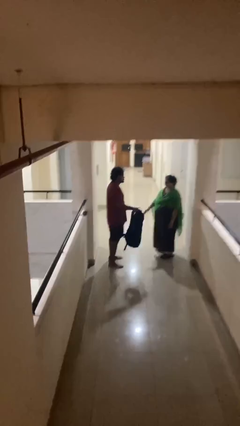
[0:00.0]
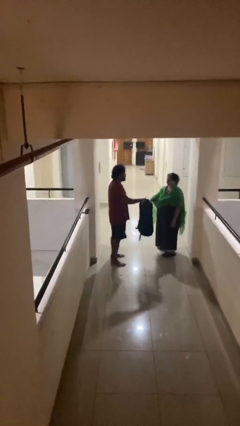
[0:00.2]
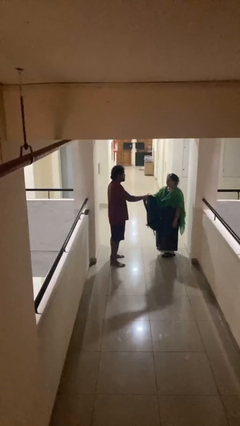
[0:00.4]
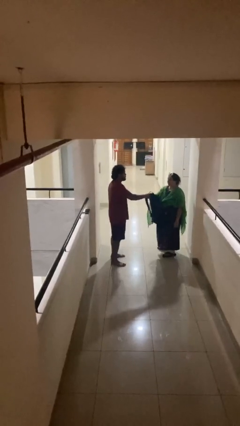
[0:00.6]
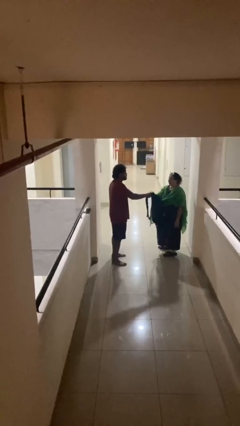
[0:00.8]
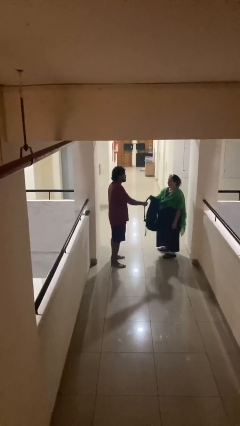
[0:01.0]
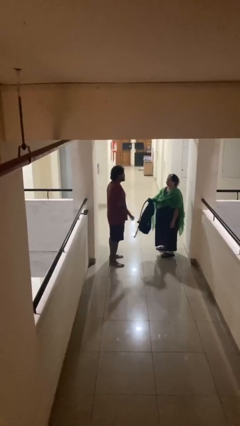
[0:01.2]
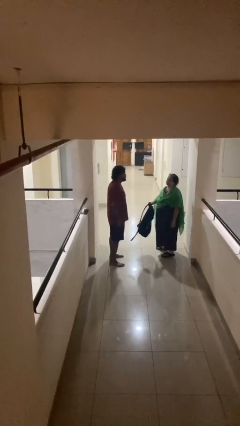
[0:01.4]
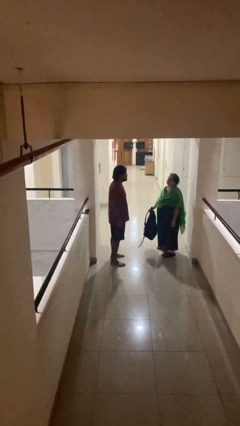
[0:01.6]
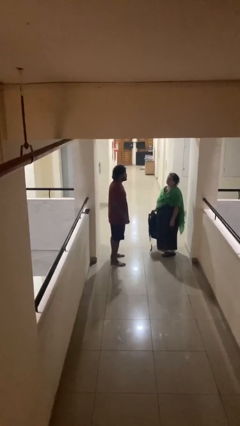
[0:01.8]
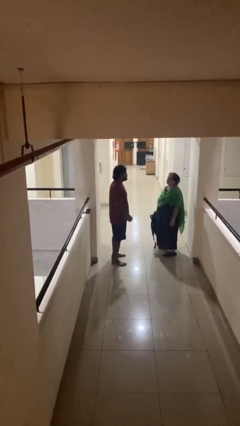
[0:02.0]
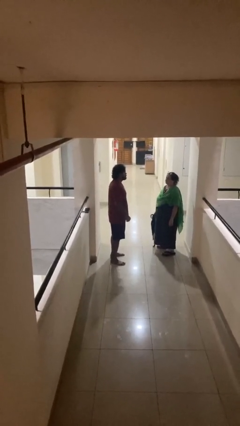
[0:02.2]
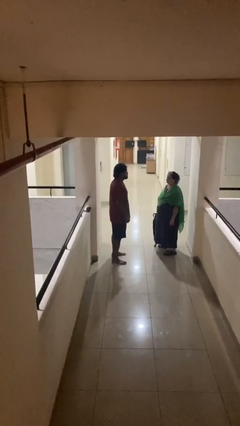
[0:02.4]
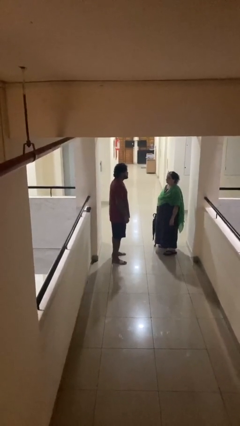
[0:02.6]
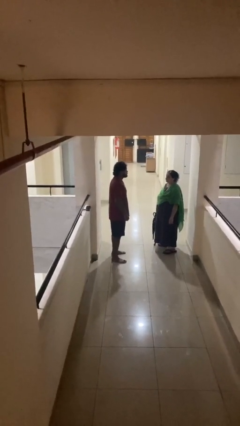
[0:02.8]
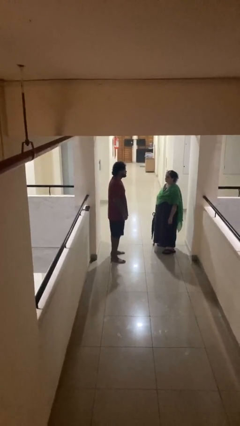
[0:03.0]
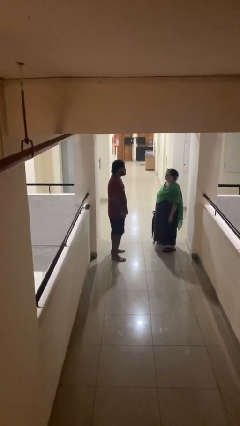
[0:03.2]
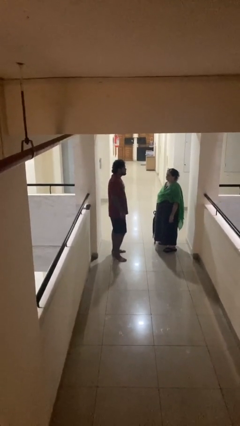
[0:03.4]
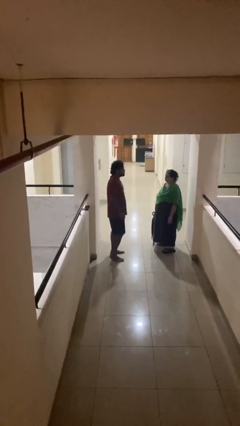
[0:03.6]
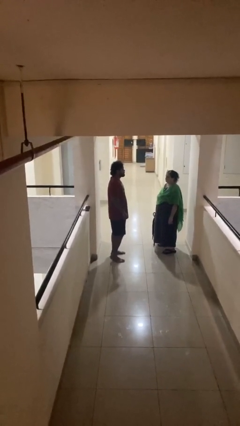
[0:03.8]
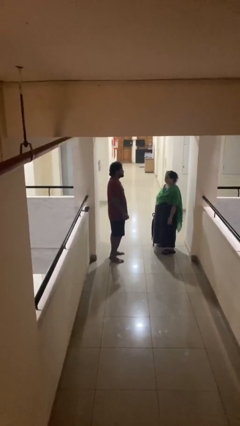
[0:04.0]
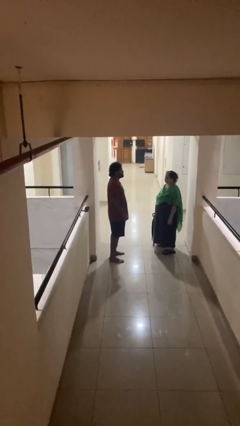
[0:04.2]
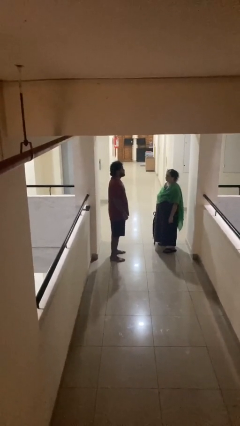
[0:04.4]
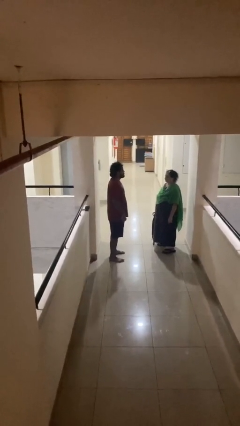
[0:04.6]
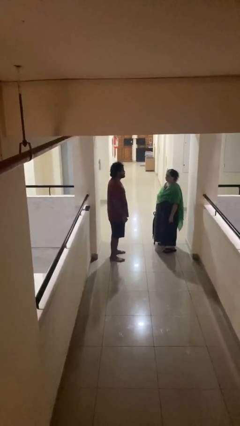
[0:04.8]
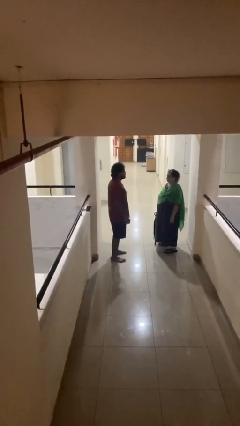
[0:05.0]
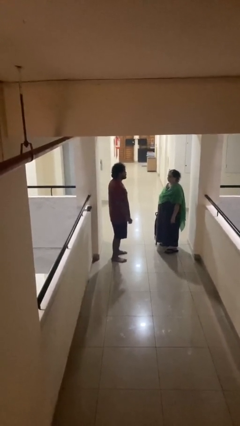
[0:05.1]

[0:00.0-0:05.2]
person transfers object to person

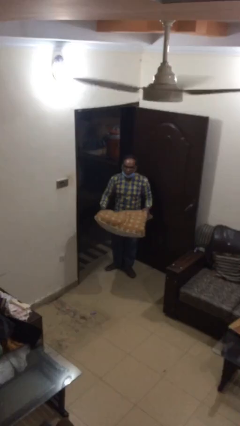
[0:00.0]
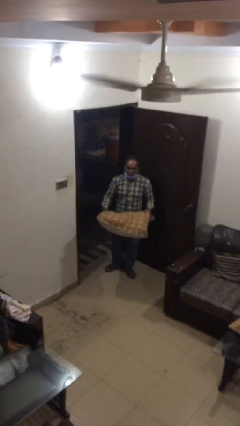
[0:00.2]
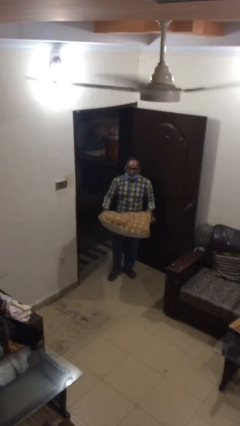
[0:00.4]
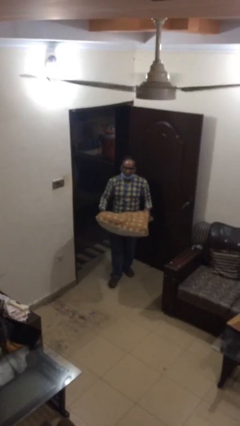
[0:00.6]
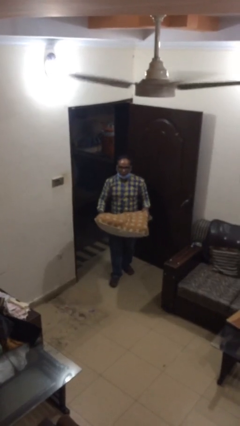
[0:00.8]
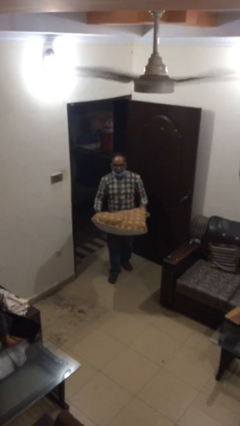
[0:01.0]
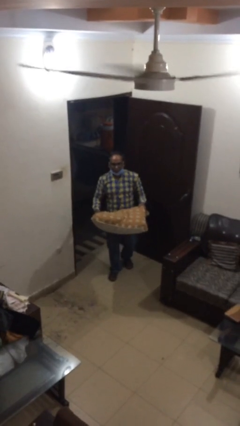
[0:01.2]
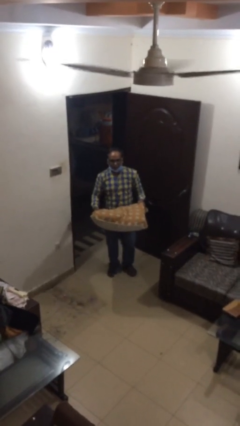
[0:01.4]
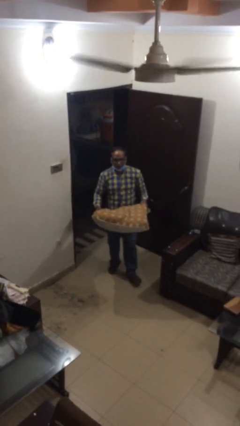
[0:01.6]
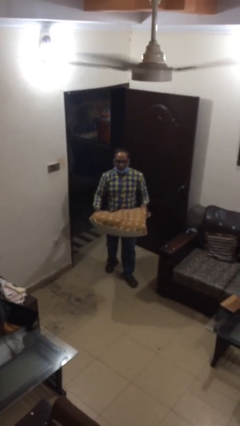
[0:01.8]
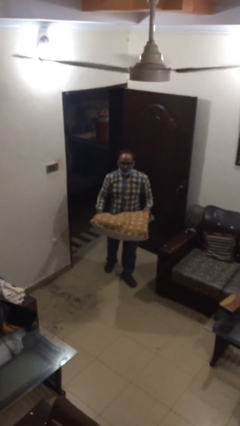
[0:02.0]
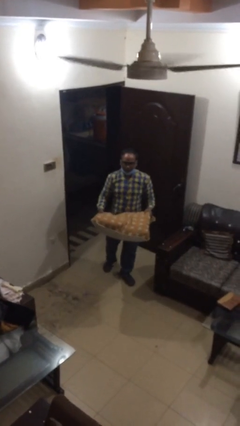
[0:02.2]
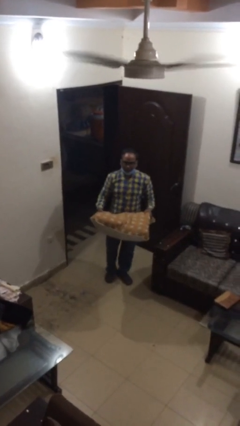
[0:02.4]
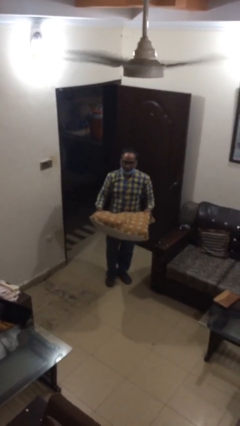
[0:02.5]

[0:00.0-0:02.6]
person carries heavy object

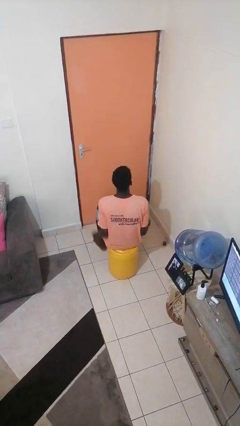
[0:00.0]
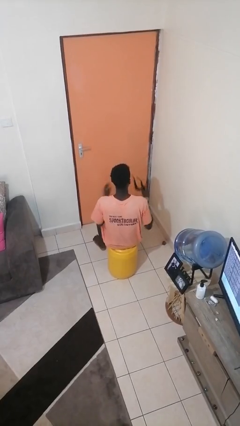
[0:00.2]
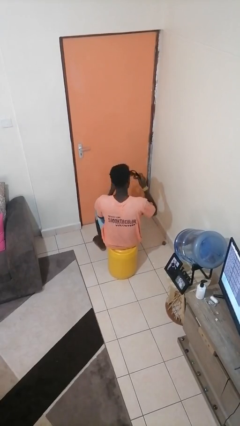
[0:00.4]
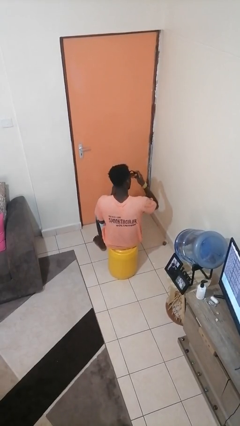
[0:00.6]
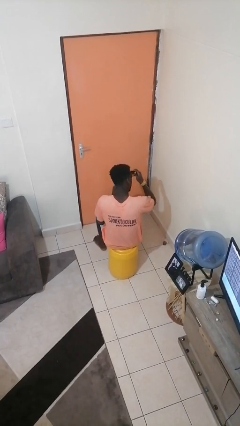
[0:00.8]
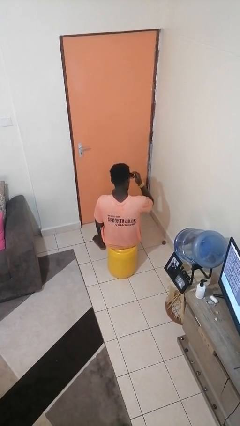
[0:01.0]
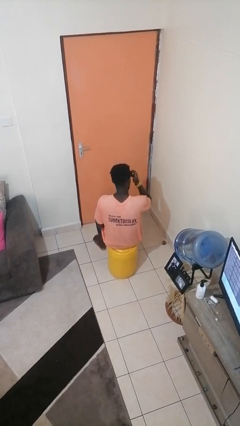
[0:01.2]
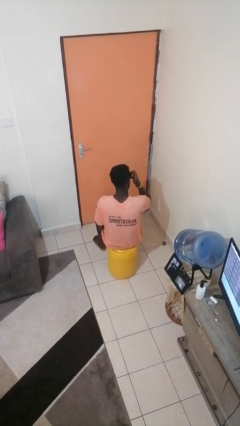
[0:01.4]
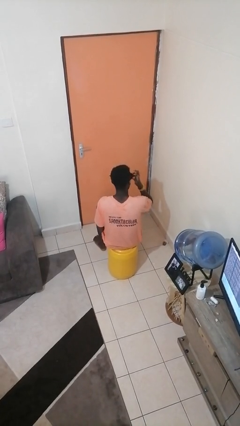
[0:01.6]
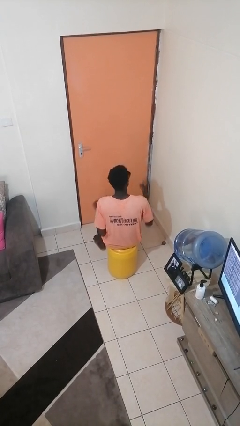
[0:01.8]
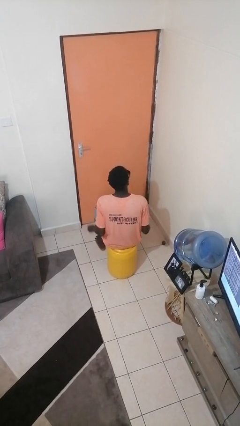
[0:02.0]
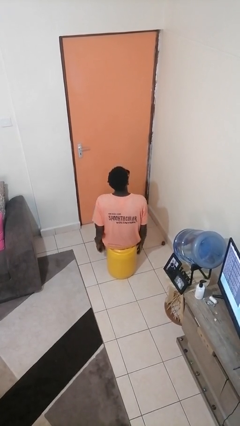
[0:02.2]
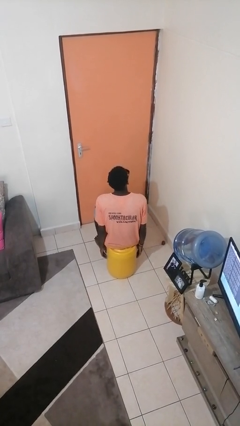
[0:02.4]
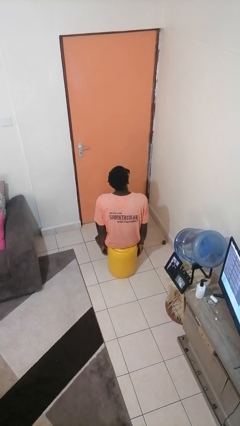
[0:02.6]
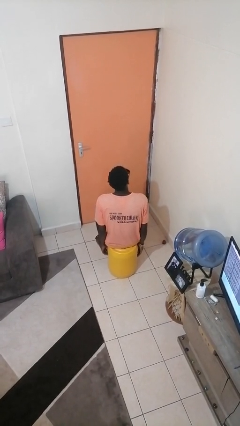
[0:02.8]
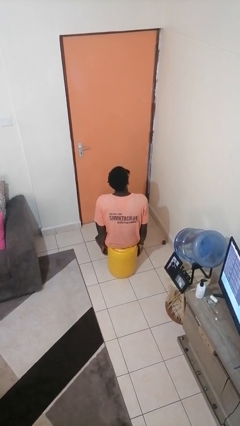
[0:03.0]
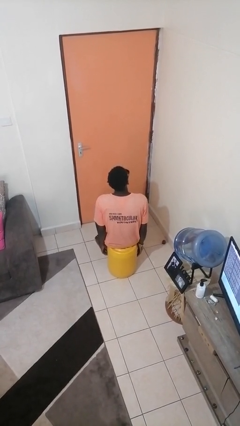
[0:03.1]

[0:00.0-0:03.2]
person puts on sunglasses

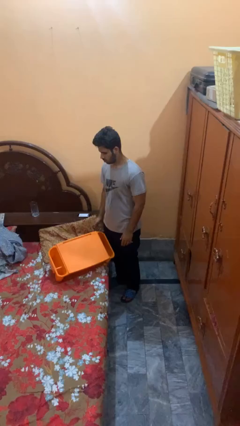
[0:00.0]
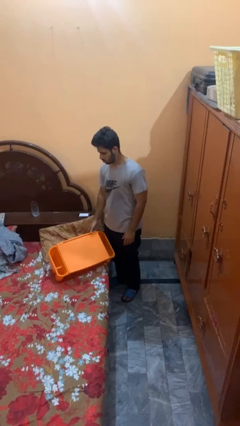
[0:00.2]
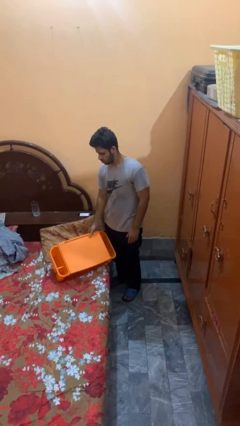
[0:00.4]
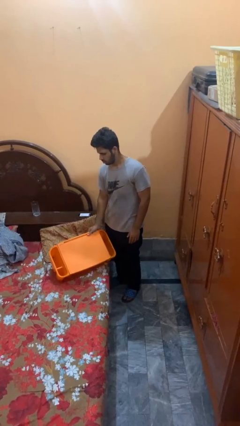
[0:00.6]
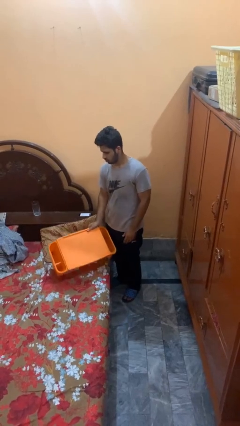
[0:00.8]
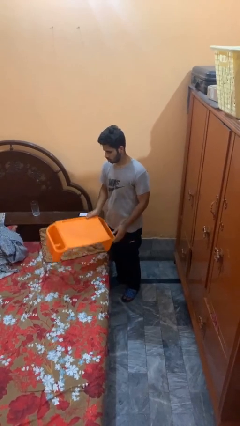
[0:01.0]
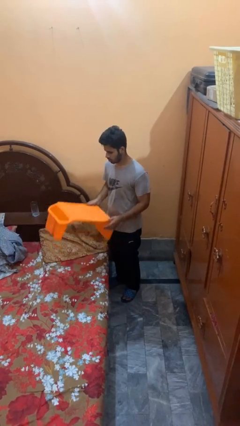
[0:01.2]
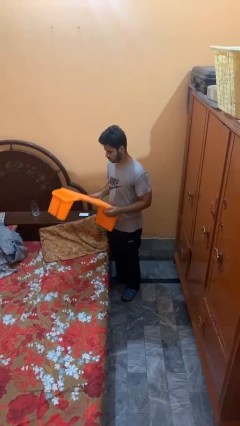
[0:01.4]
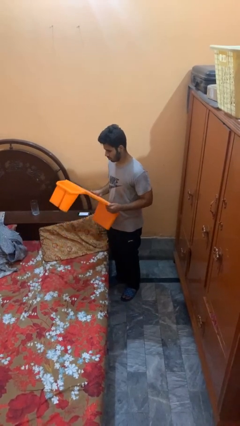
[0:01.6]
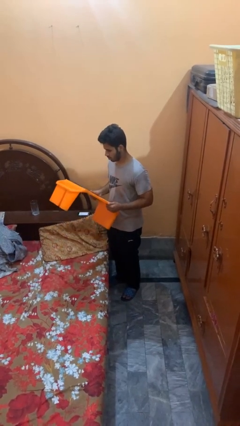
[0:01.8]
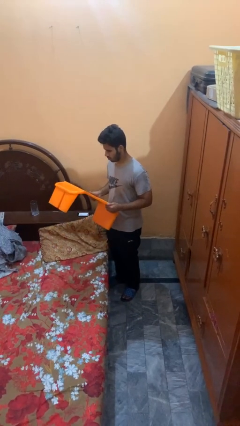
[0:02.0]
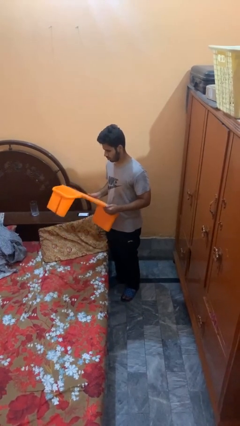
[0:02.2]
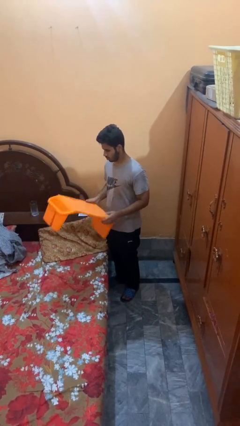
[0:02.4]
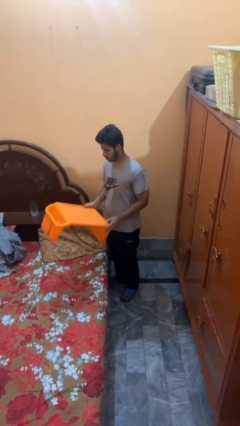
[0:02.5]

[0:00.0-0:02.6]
person picks up object from bed

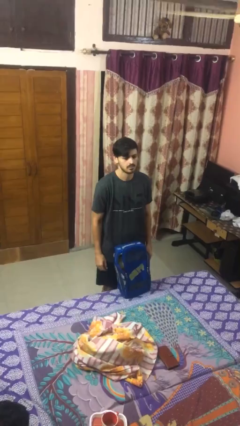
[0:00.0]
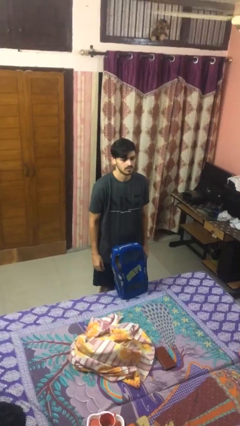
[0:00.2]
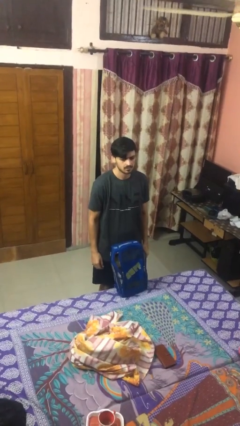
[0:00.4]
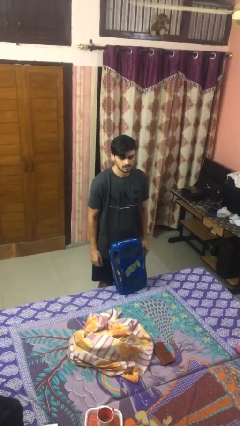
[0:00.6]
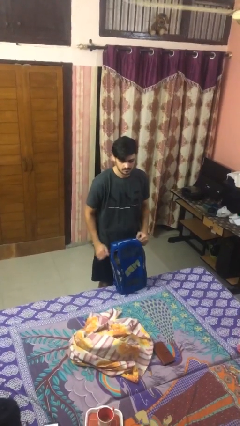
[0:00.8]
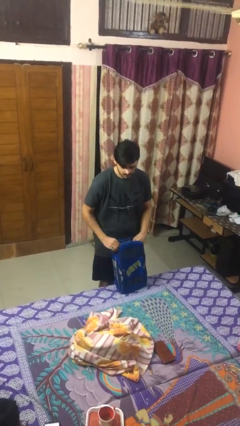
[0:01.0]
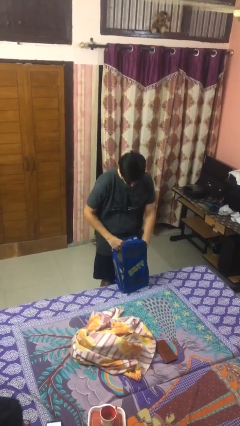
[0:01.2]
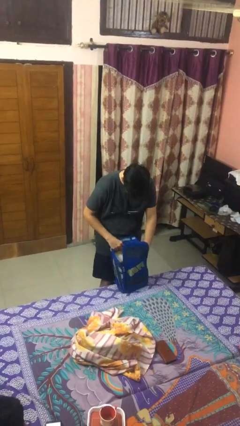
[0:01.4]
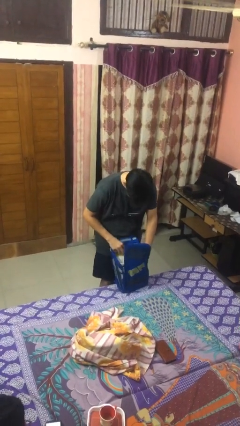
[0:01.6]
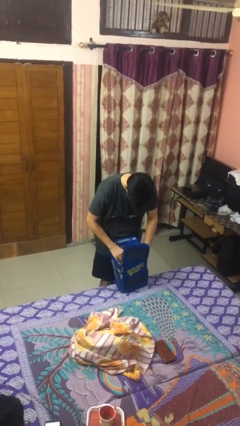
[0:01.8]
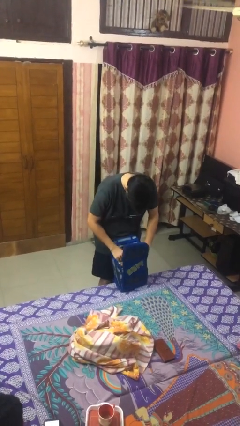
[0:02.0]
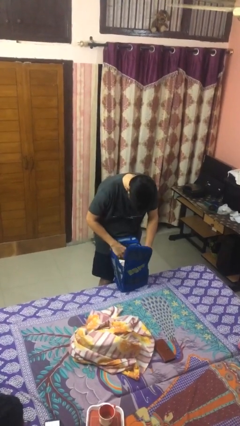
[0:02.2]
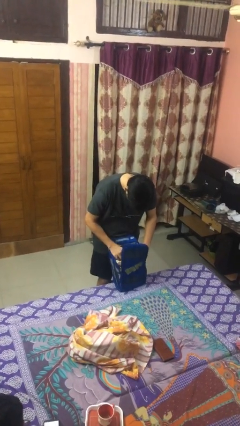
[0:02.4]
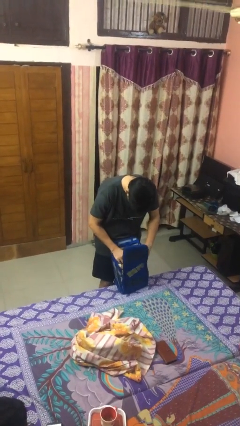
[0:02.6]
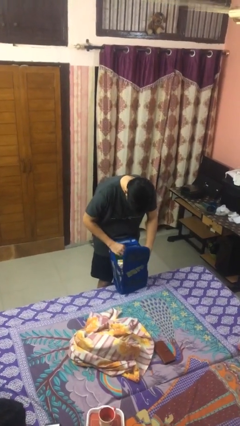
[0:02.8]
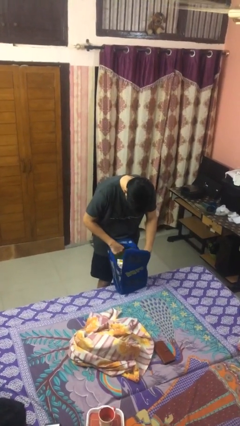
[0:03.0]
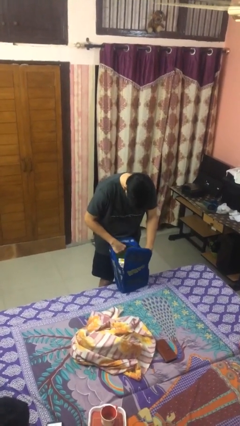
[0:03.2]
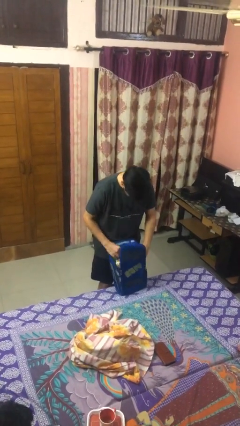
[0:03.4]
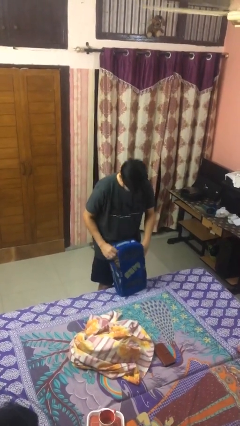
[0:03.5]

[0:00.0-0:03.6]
person searches in bag

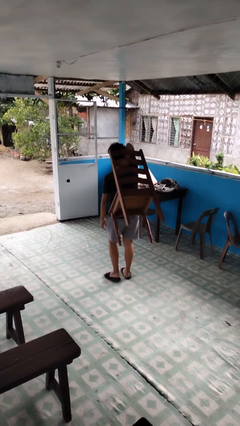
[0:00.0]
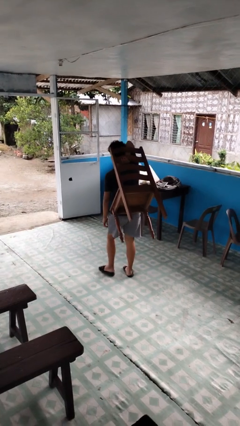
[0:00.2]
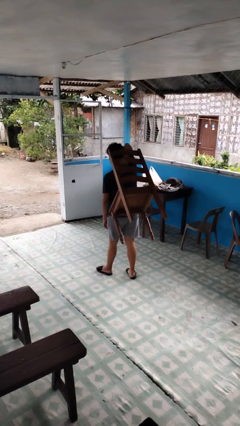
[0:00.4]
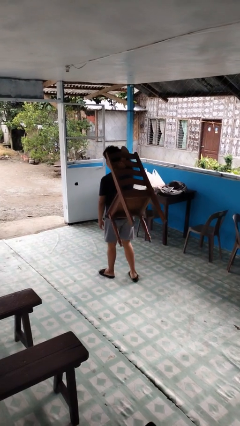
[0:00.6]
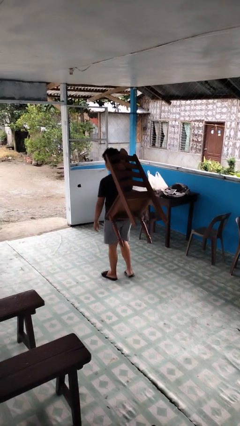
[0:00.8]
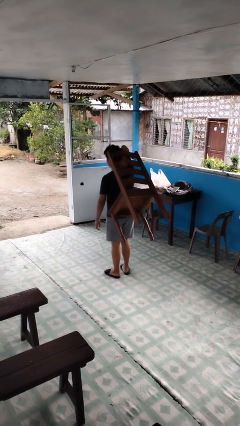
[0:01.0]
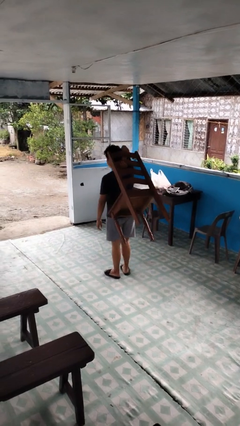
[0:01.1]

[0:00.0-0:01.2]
person carries furniture
